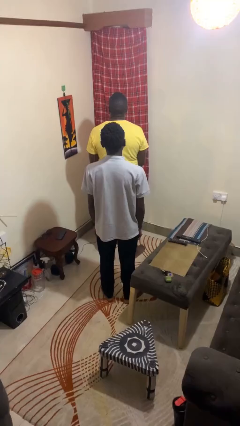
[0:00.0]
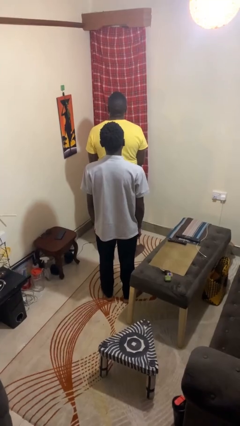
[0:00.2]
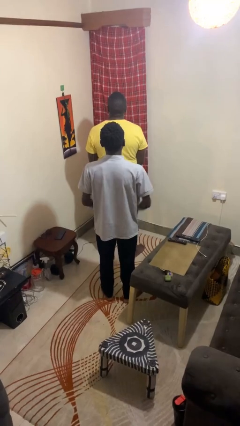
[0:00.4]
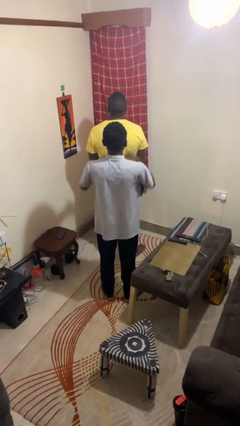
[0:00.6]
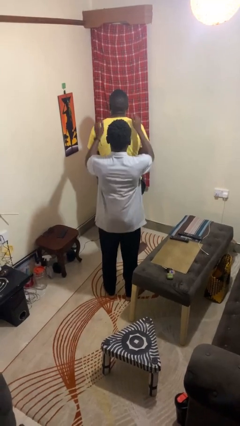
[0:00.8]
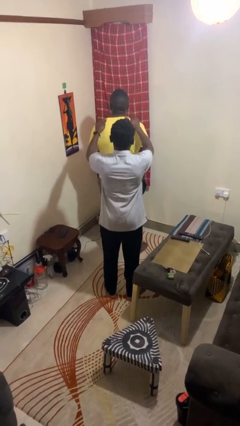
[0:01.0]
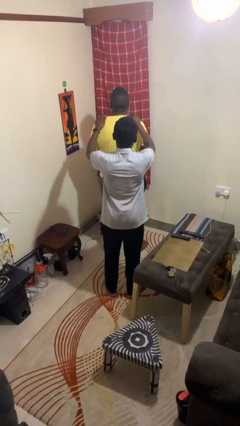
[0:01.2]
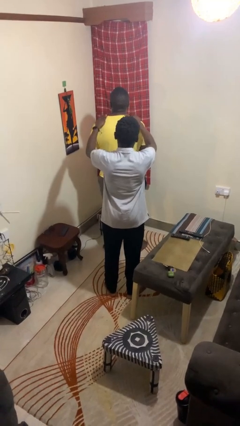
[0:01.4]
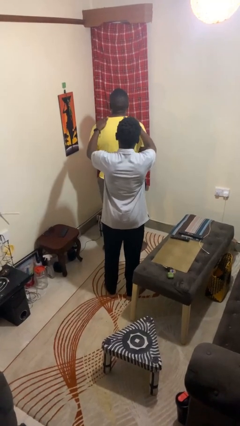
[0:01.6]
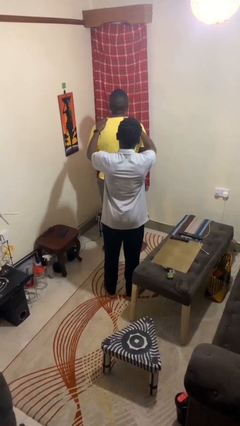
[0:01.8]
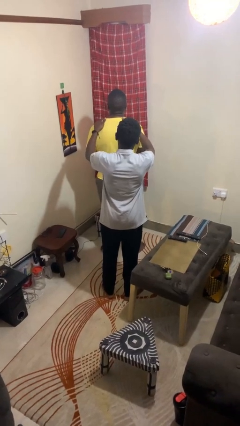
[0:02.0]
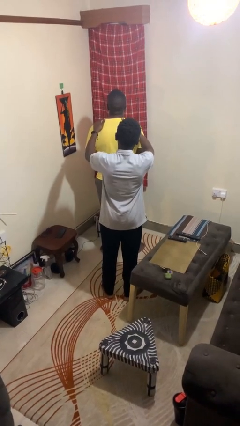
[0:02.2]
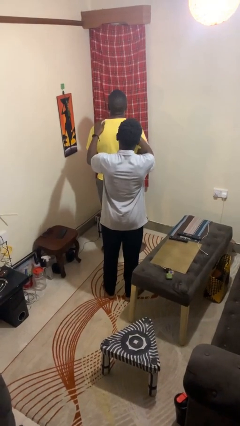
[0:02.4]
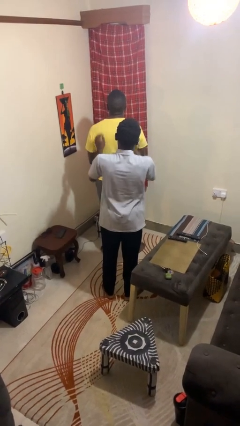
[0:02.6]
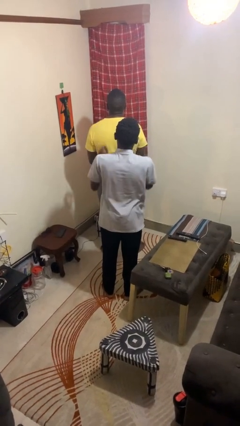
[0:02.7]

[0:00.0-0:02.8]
person touches back of person

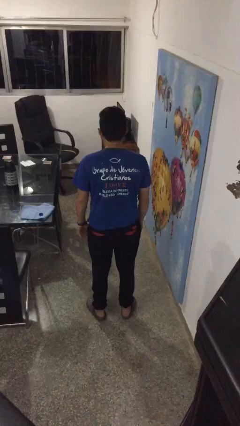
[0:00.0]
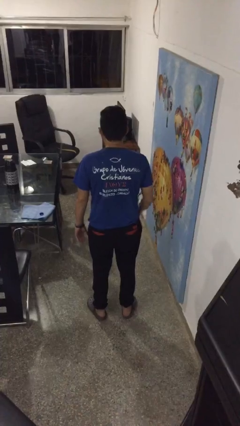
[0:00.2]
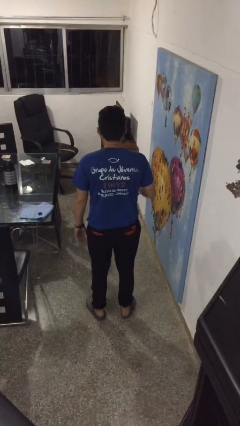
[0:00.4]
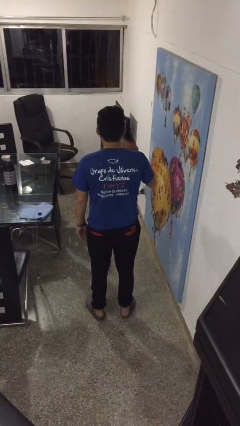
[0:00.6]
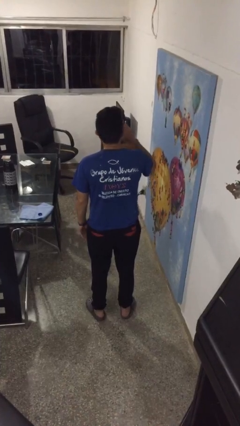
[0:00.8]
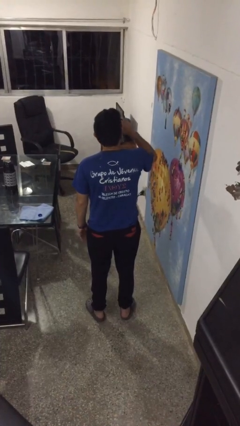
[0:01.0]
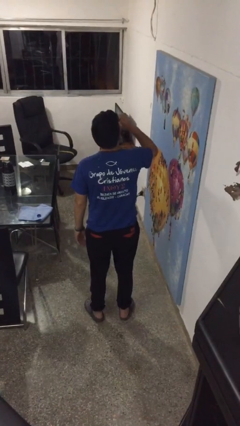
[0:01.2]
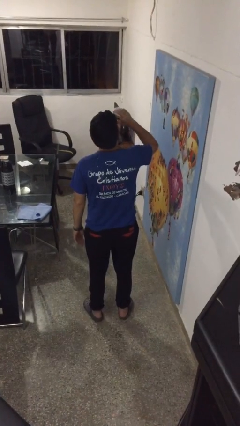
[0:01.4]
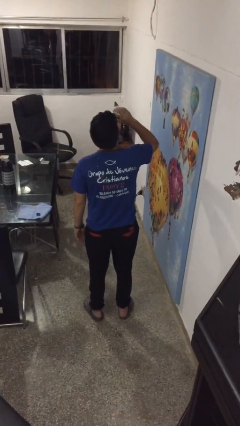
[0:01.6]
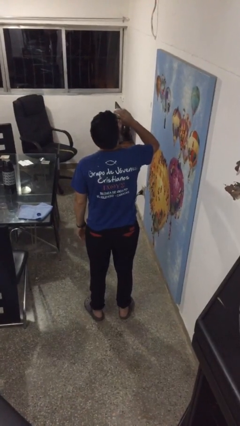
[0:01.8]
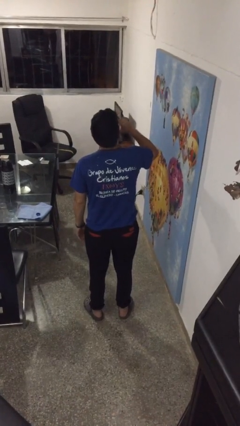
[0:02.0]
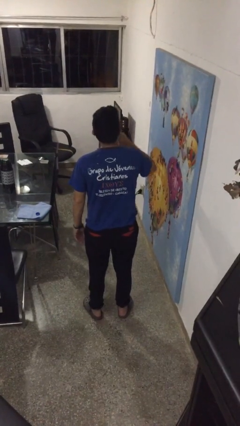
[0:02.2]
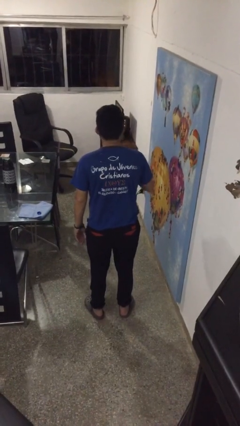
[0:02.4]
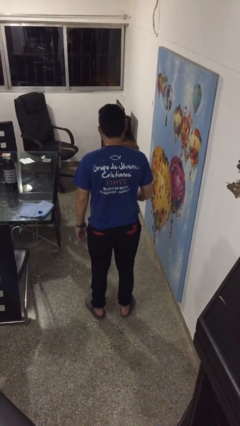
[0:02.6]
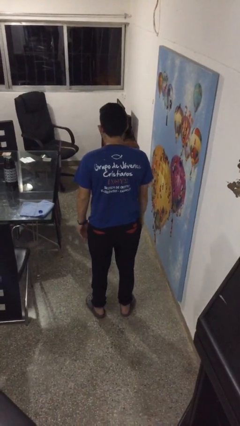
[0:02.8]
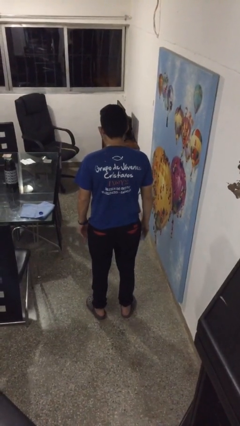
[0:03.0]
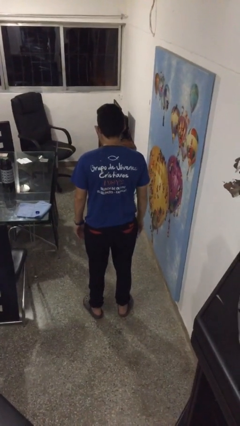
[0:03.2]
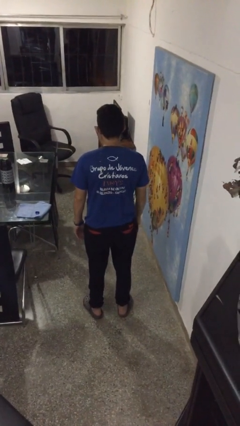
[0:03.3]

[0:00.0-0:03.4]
person drinks from bottle

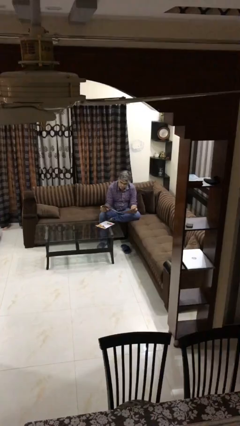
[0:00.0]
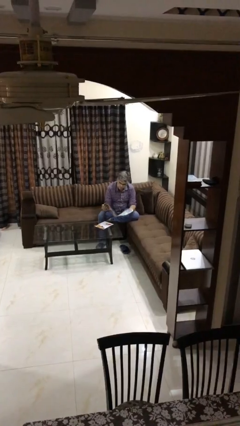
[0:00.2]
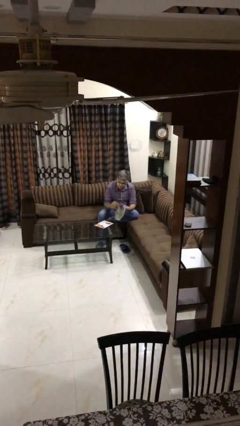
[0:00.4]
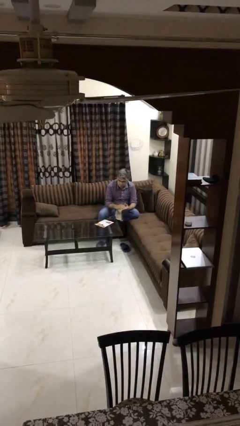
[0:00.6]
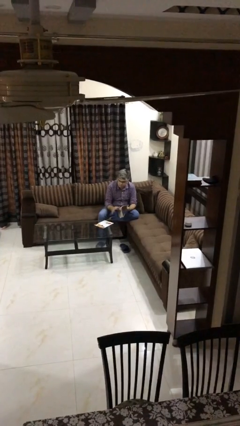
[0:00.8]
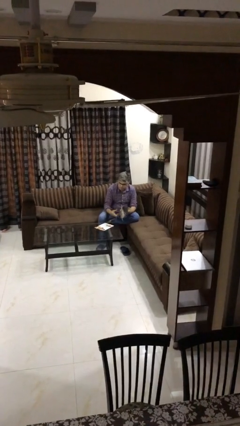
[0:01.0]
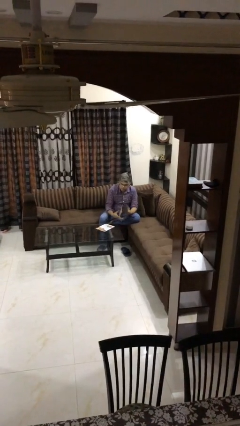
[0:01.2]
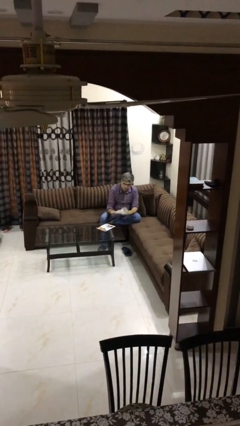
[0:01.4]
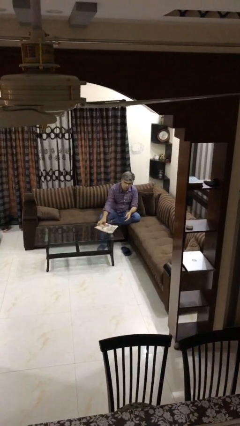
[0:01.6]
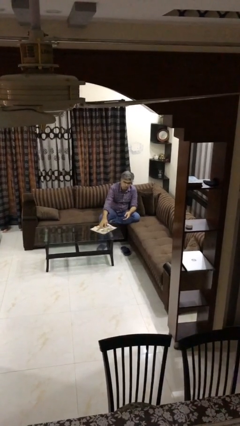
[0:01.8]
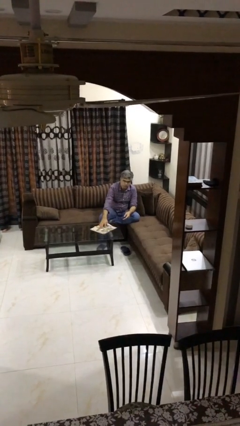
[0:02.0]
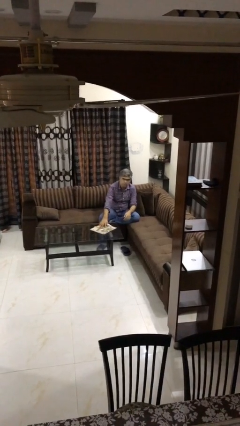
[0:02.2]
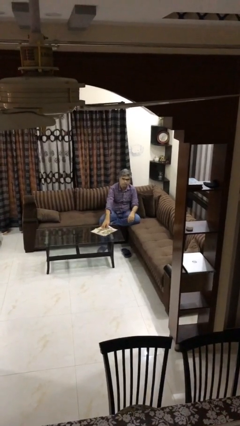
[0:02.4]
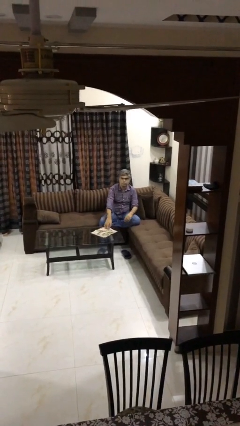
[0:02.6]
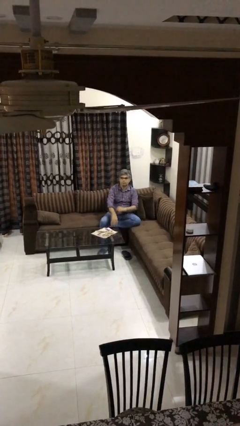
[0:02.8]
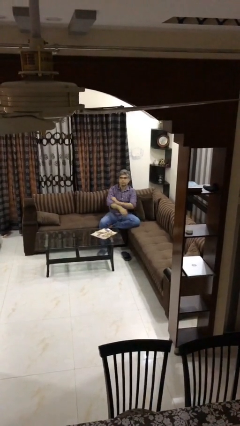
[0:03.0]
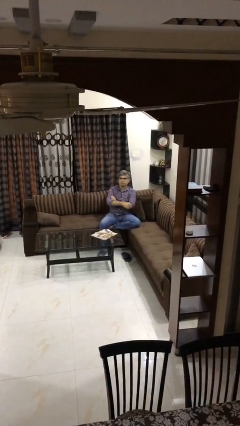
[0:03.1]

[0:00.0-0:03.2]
person puts down object on table

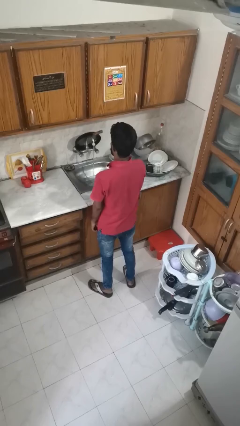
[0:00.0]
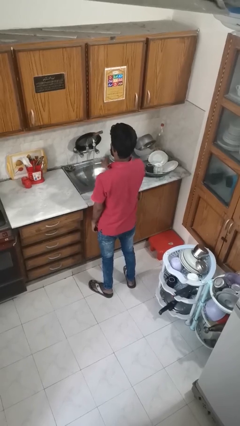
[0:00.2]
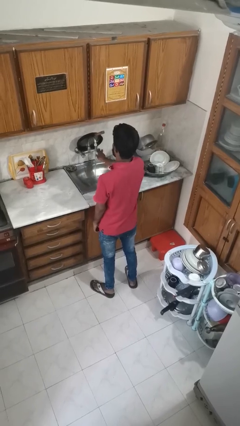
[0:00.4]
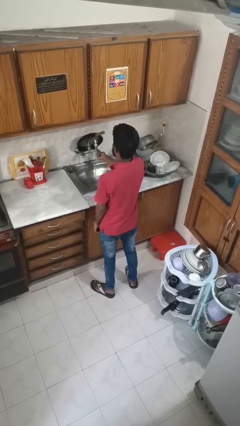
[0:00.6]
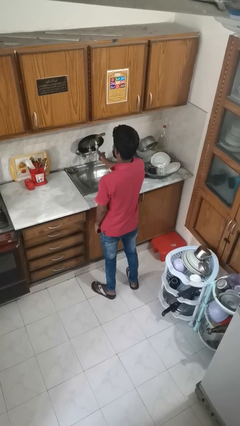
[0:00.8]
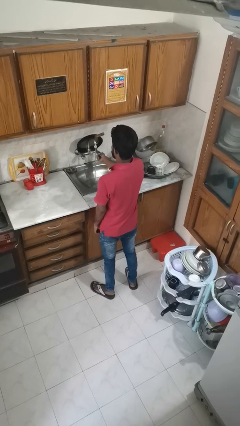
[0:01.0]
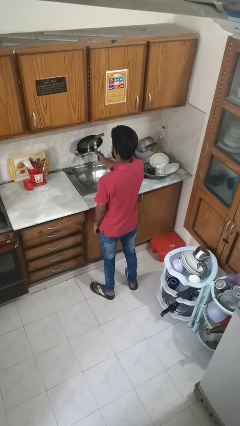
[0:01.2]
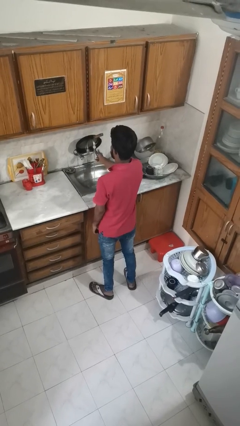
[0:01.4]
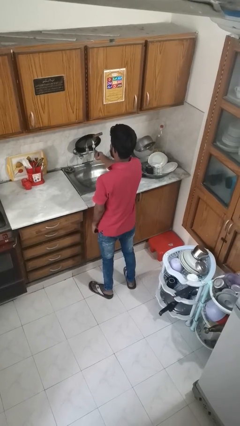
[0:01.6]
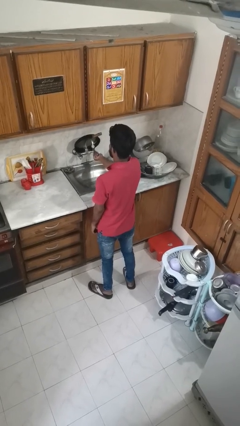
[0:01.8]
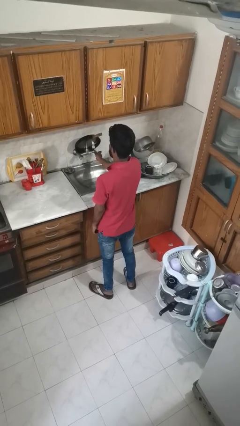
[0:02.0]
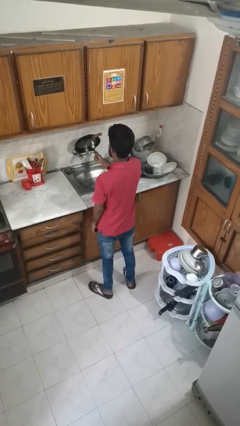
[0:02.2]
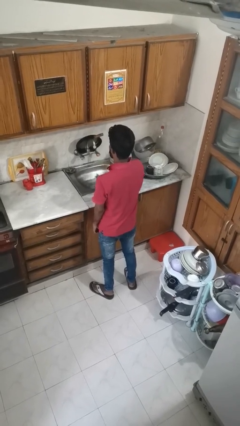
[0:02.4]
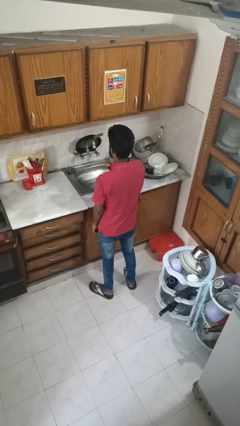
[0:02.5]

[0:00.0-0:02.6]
person turns off faucet

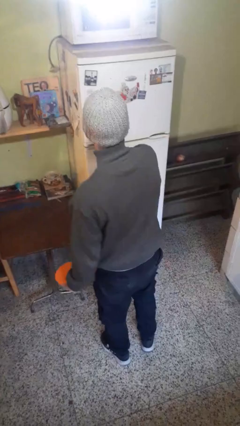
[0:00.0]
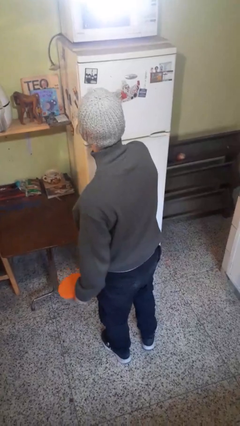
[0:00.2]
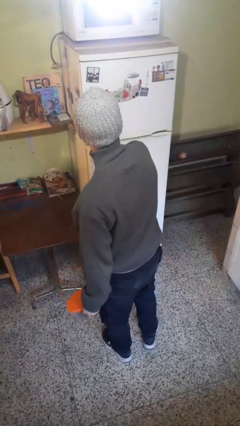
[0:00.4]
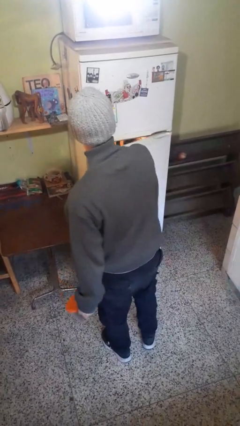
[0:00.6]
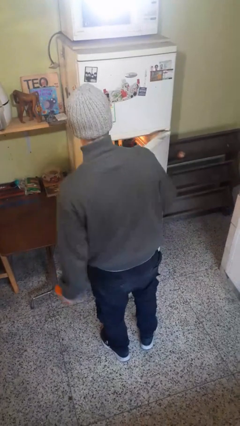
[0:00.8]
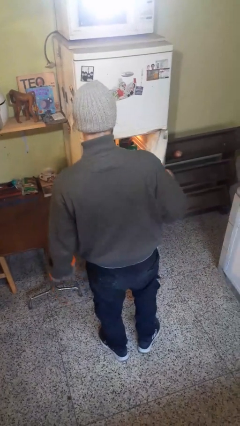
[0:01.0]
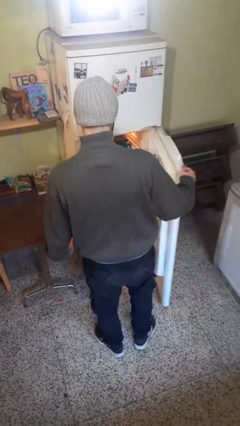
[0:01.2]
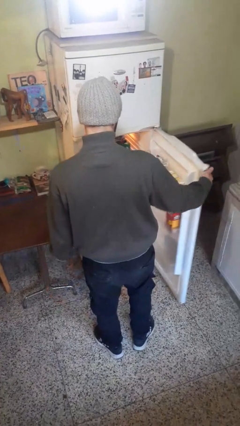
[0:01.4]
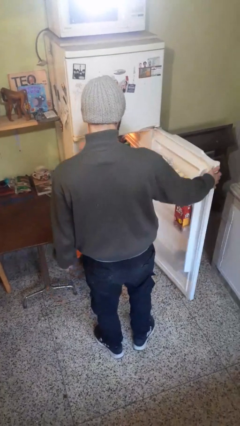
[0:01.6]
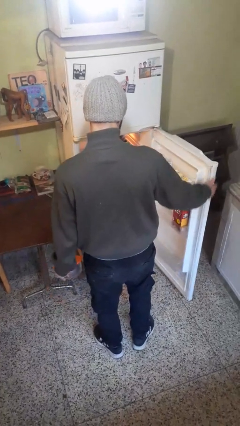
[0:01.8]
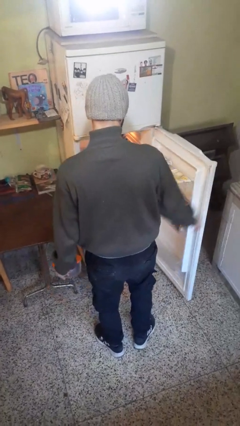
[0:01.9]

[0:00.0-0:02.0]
person opens refrigerator

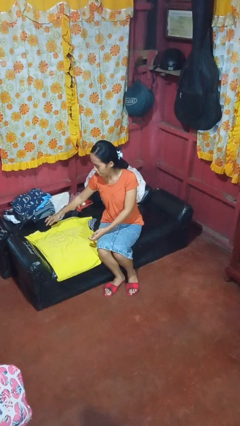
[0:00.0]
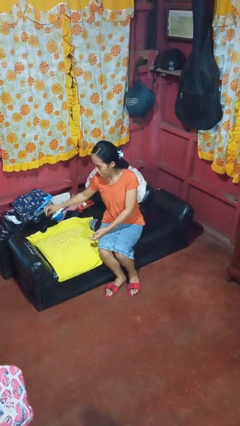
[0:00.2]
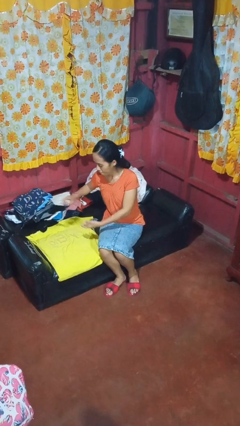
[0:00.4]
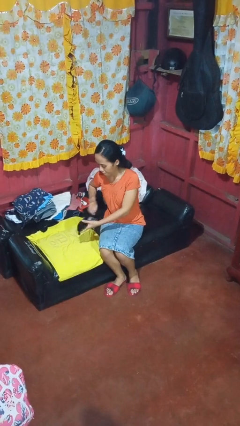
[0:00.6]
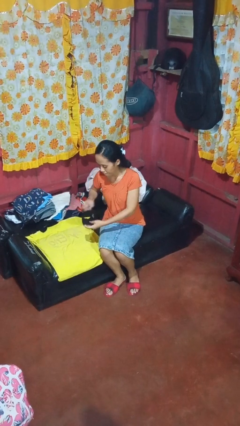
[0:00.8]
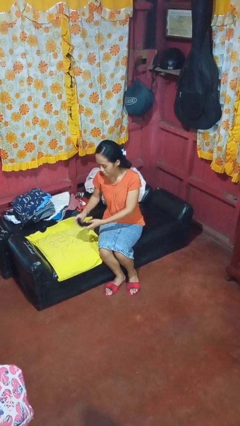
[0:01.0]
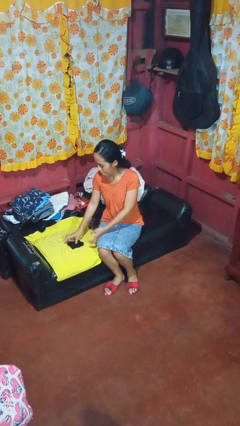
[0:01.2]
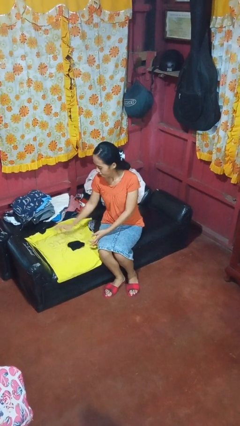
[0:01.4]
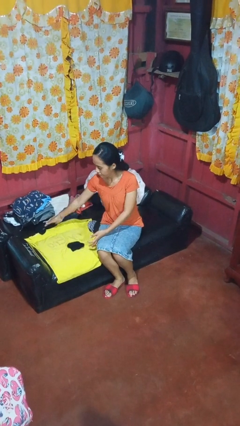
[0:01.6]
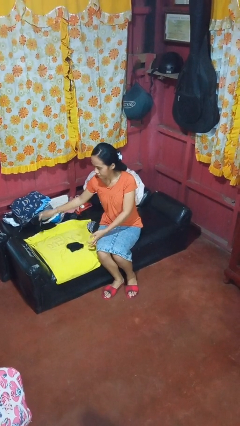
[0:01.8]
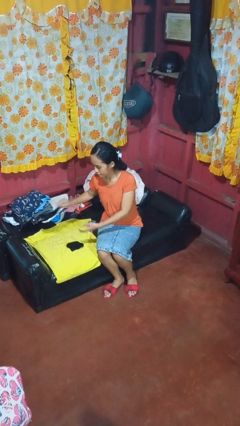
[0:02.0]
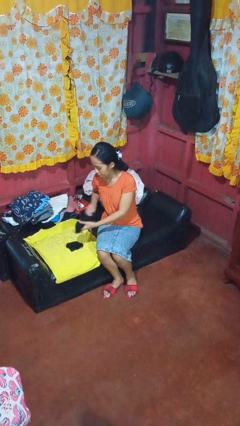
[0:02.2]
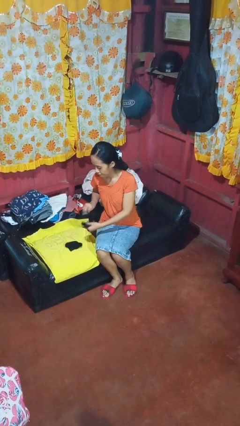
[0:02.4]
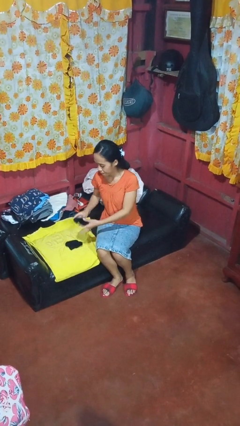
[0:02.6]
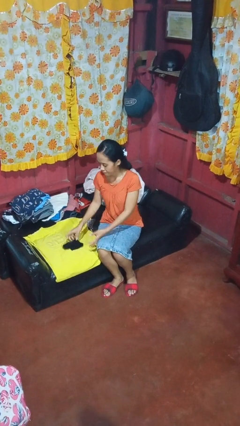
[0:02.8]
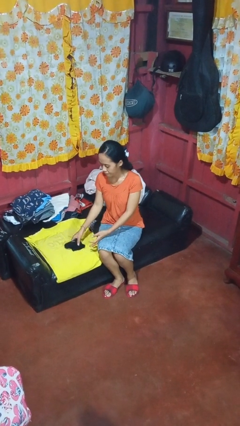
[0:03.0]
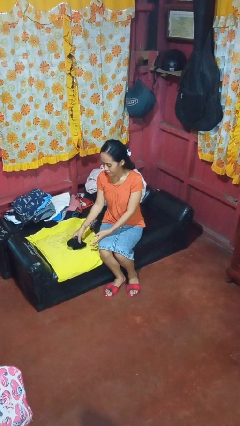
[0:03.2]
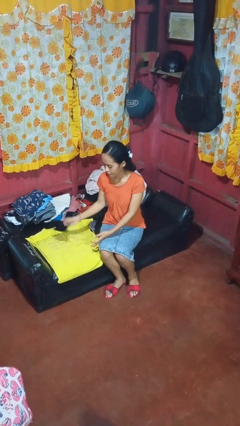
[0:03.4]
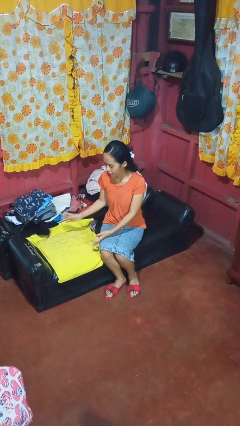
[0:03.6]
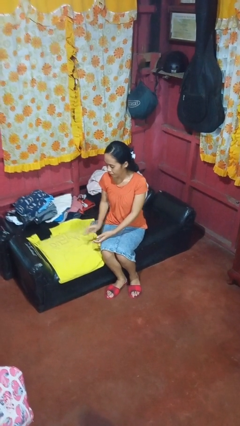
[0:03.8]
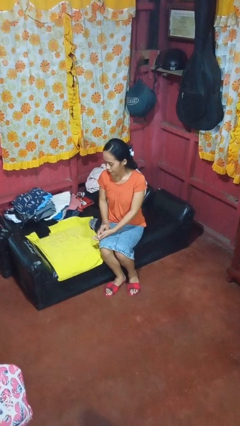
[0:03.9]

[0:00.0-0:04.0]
person folds socks
